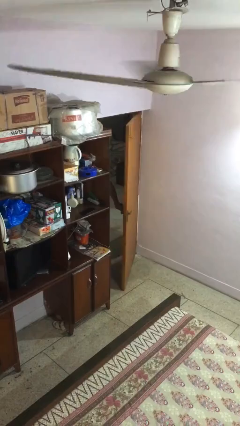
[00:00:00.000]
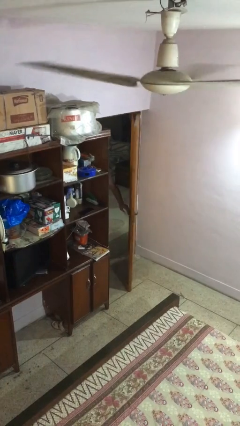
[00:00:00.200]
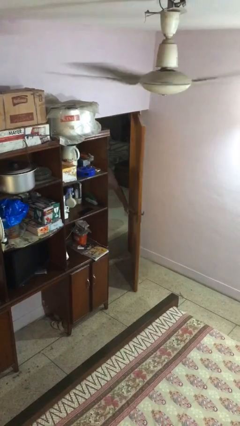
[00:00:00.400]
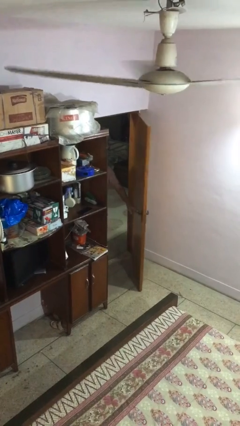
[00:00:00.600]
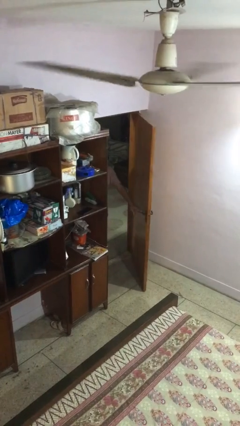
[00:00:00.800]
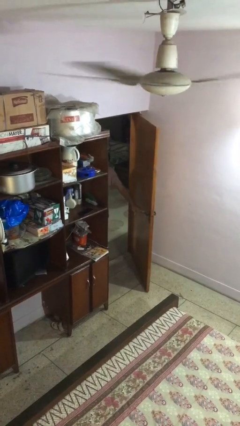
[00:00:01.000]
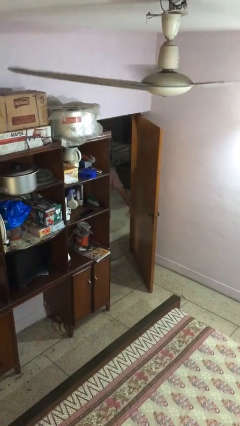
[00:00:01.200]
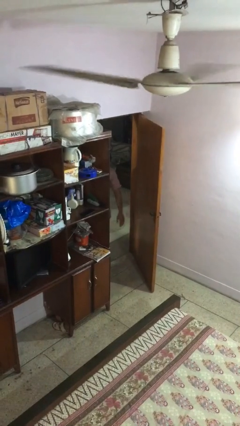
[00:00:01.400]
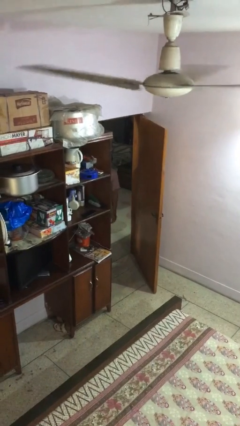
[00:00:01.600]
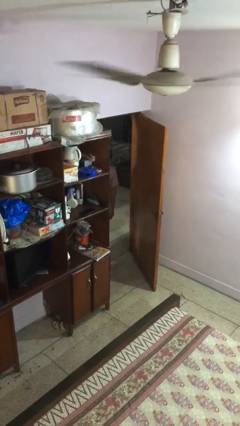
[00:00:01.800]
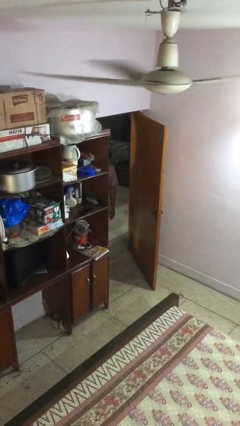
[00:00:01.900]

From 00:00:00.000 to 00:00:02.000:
person opens facility door

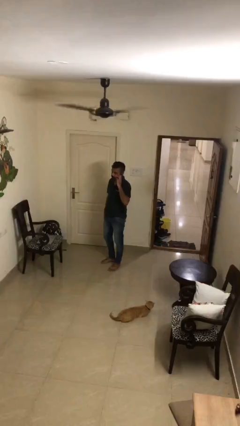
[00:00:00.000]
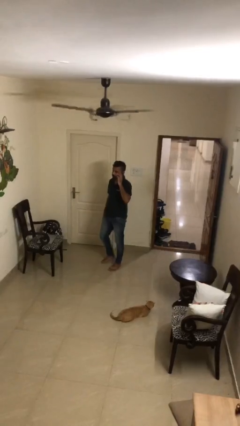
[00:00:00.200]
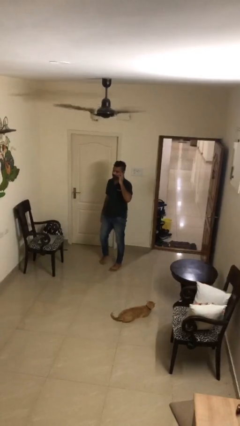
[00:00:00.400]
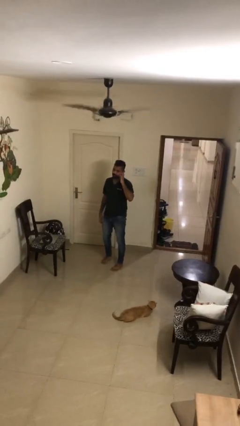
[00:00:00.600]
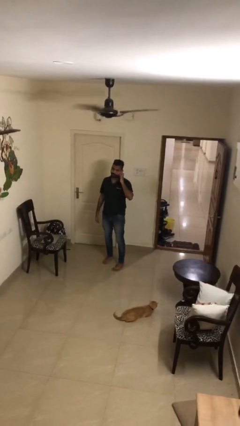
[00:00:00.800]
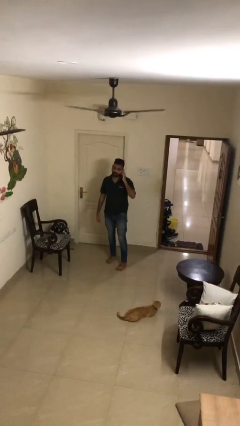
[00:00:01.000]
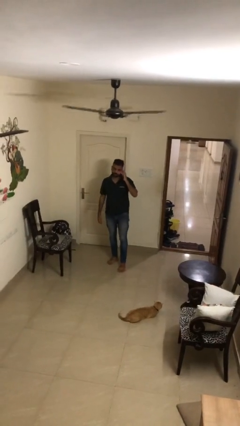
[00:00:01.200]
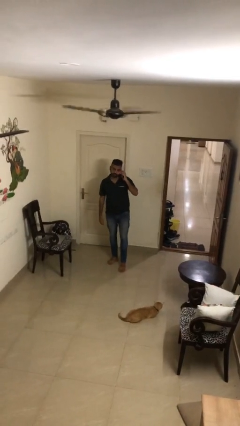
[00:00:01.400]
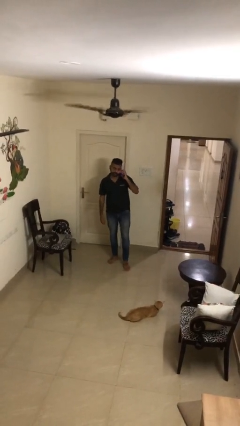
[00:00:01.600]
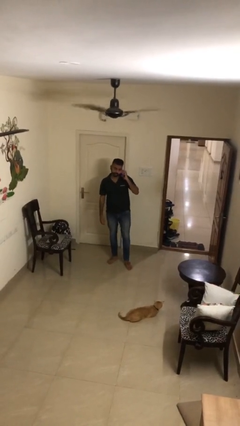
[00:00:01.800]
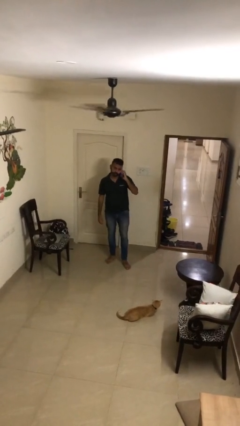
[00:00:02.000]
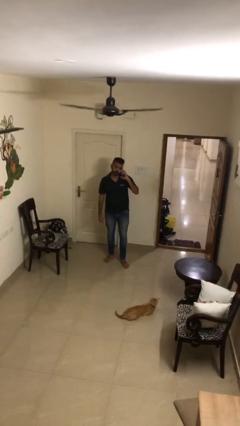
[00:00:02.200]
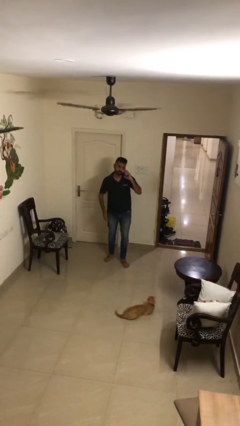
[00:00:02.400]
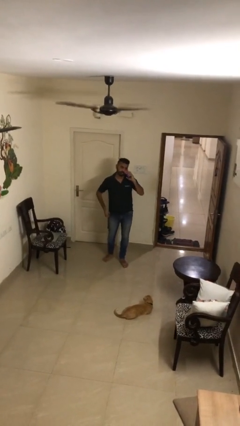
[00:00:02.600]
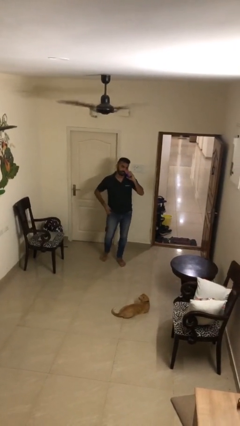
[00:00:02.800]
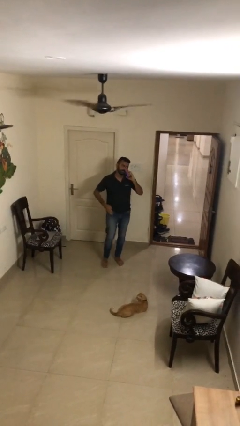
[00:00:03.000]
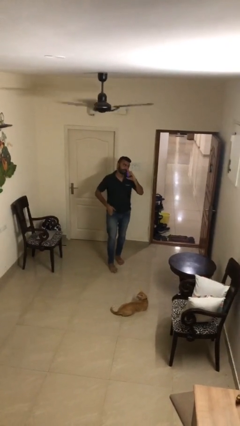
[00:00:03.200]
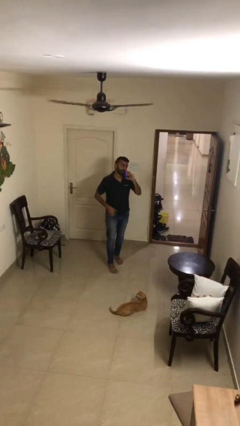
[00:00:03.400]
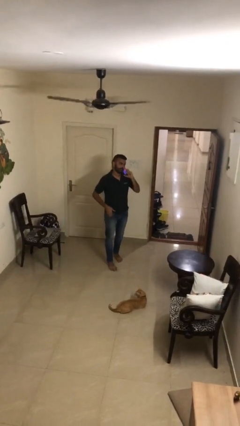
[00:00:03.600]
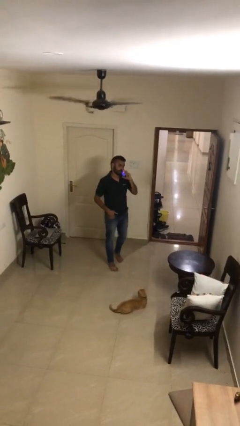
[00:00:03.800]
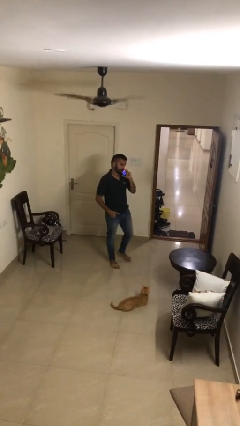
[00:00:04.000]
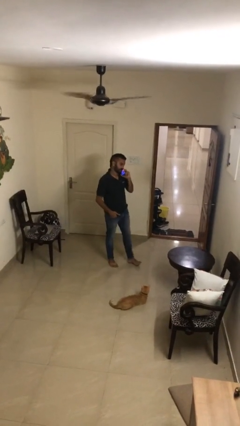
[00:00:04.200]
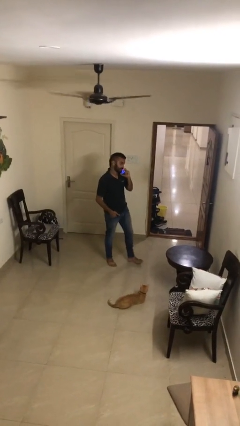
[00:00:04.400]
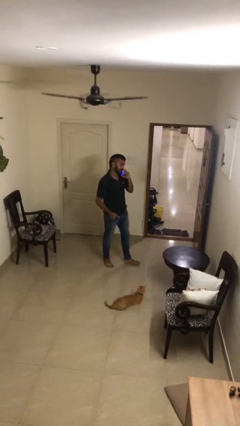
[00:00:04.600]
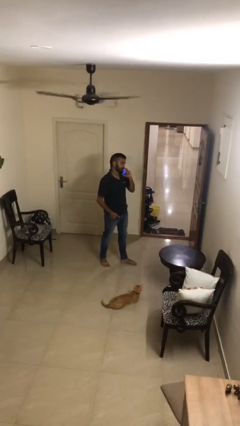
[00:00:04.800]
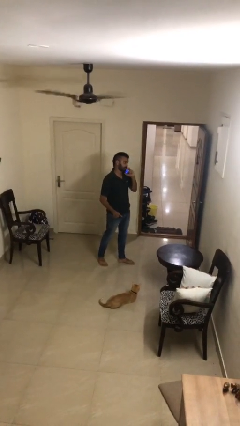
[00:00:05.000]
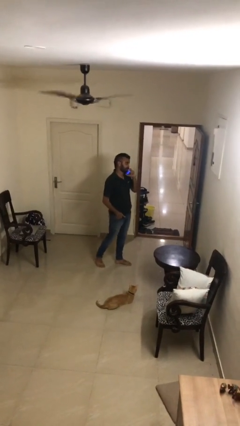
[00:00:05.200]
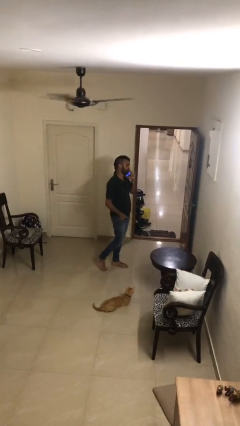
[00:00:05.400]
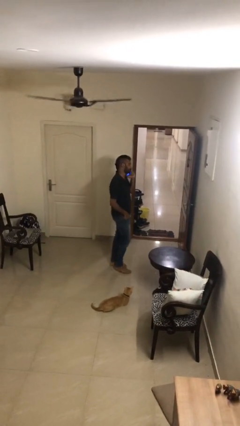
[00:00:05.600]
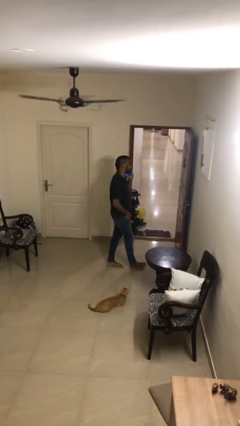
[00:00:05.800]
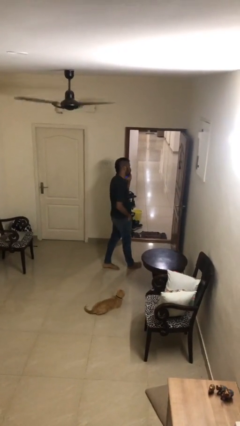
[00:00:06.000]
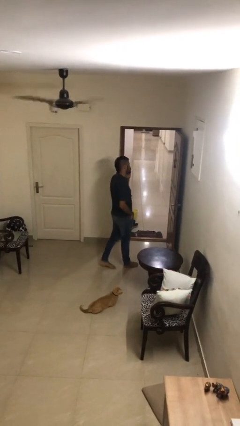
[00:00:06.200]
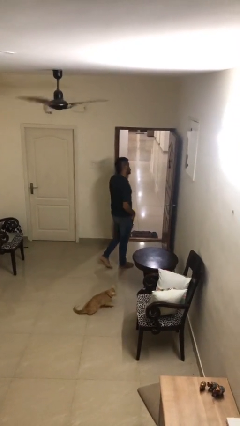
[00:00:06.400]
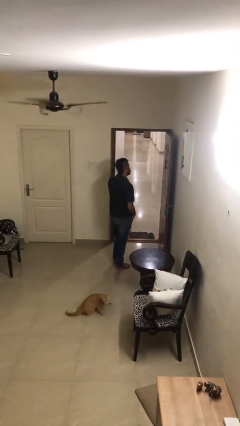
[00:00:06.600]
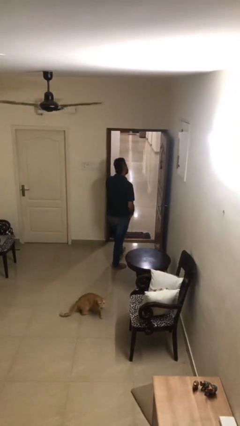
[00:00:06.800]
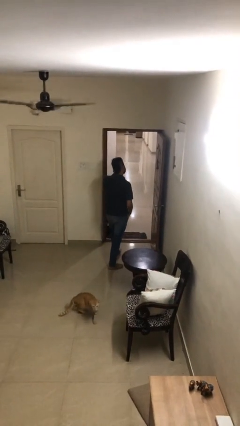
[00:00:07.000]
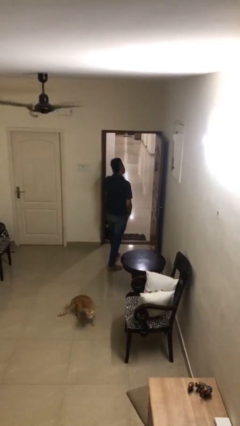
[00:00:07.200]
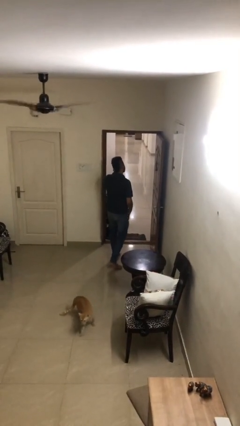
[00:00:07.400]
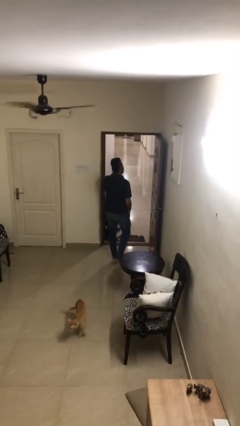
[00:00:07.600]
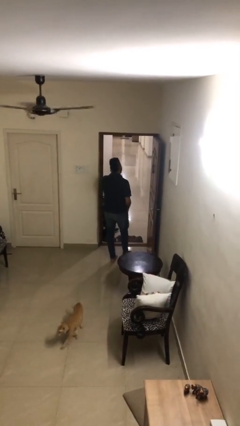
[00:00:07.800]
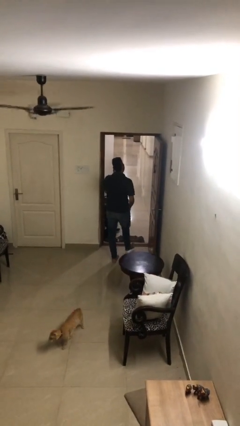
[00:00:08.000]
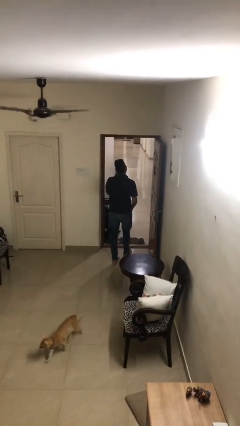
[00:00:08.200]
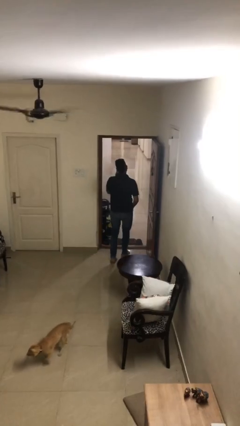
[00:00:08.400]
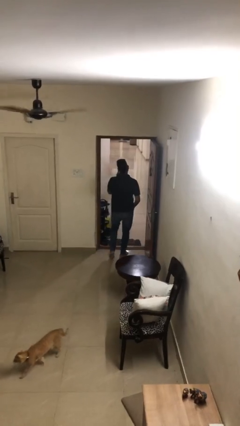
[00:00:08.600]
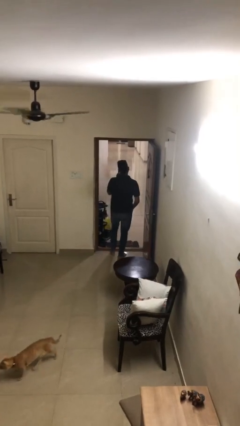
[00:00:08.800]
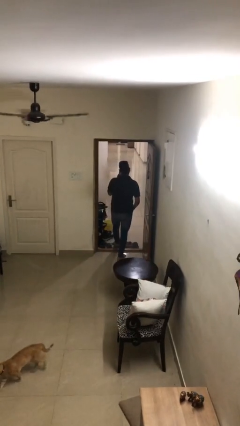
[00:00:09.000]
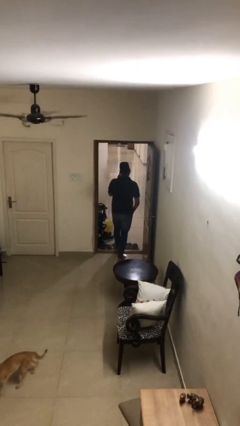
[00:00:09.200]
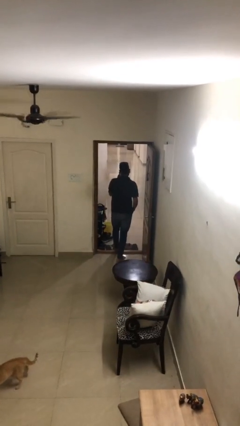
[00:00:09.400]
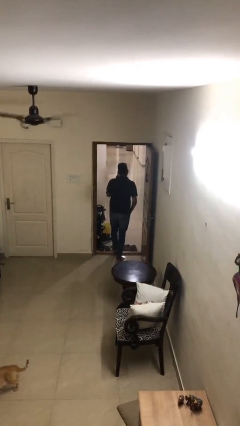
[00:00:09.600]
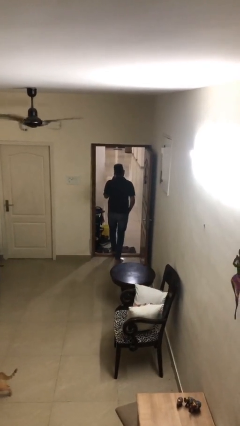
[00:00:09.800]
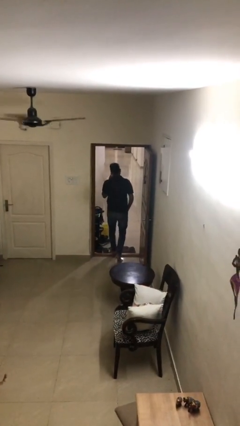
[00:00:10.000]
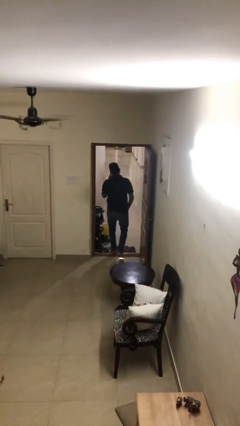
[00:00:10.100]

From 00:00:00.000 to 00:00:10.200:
person talks on phone

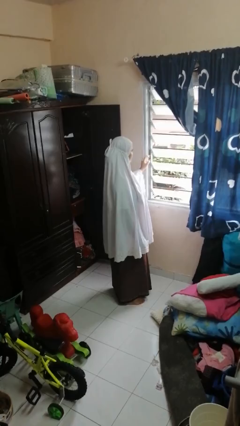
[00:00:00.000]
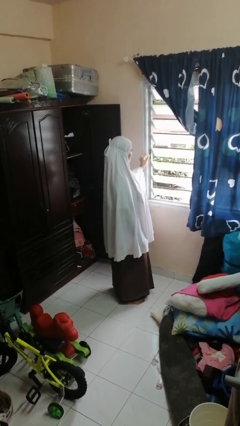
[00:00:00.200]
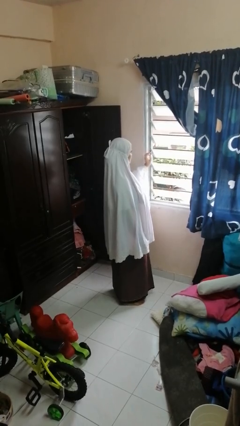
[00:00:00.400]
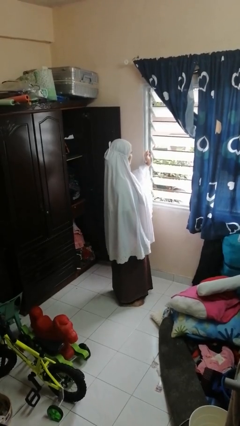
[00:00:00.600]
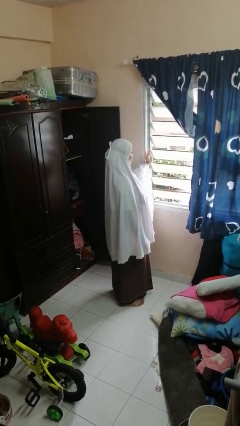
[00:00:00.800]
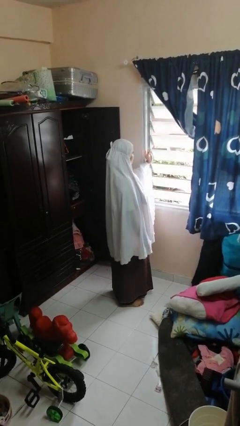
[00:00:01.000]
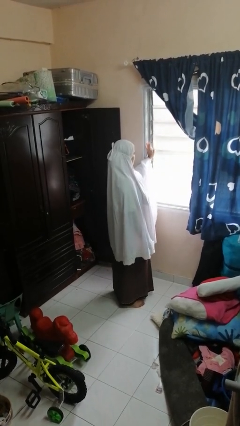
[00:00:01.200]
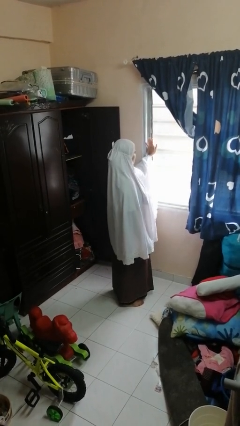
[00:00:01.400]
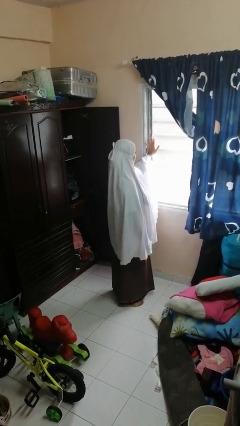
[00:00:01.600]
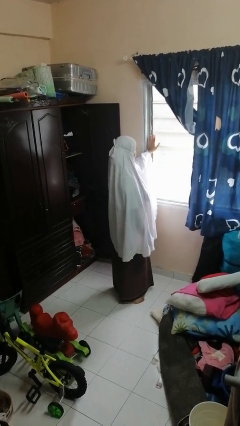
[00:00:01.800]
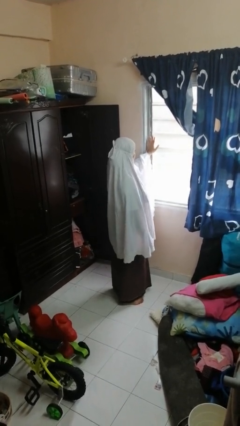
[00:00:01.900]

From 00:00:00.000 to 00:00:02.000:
person closes home window

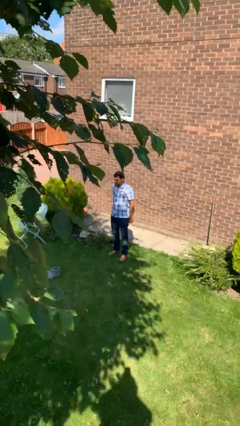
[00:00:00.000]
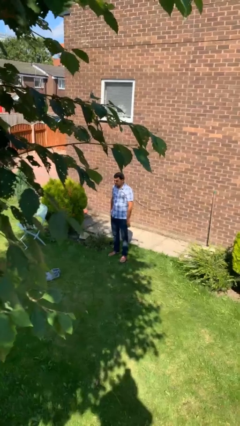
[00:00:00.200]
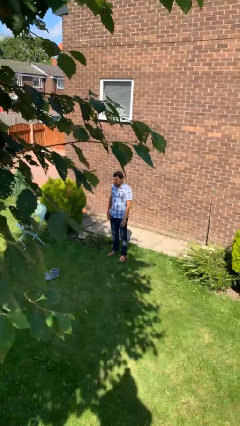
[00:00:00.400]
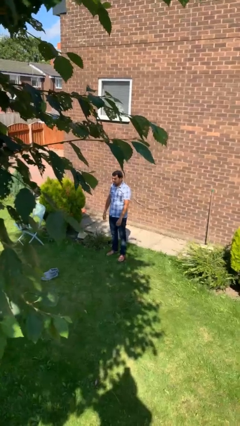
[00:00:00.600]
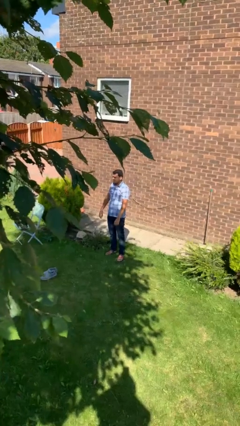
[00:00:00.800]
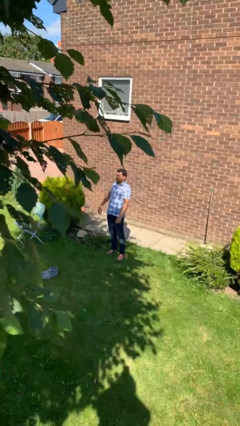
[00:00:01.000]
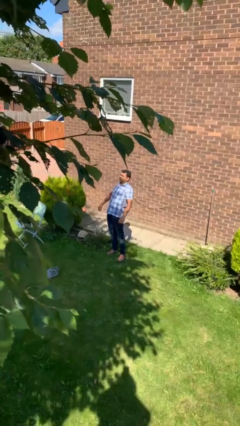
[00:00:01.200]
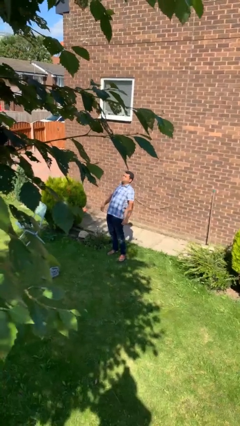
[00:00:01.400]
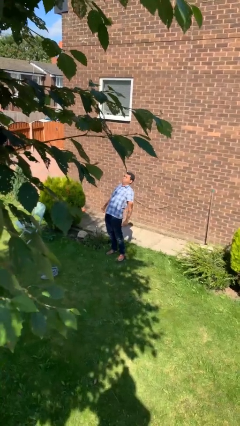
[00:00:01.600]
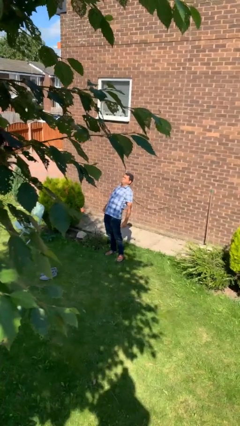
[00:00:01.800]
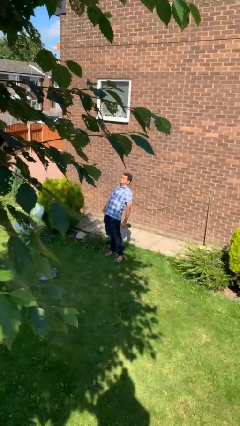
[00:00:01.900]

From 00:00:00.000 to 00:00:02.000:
person stretches back

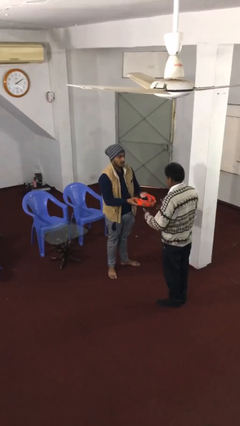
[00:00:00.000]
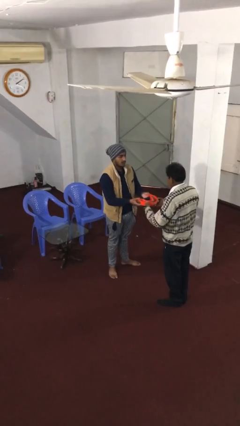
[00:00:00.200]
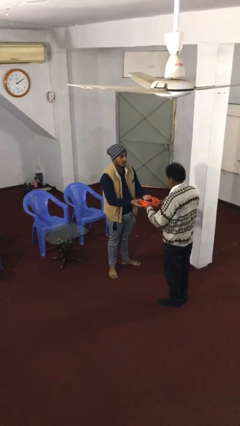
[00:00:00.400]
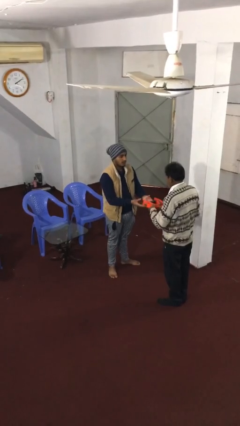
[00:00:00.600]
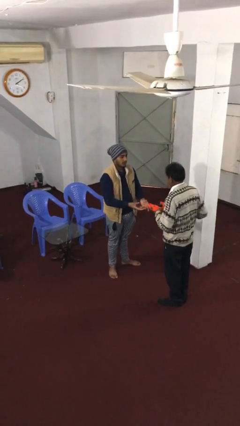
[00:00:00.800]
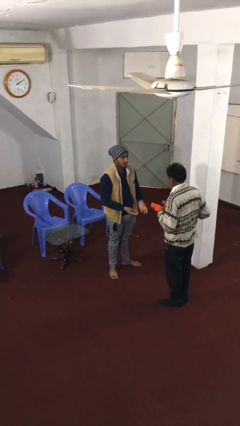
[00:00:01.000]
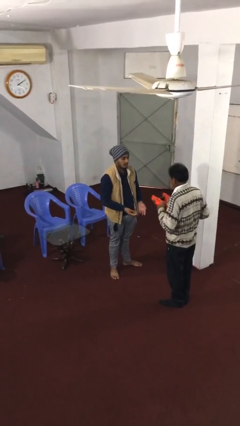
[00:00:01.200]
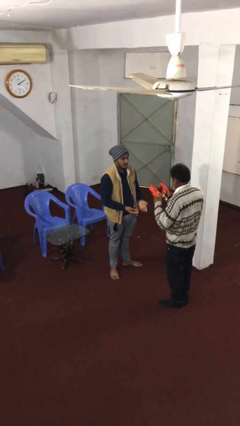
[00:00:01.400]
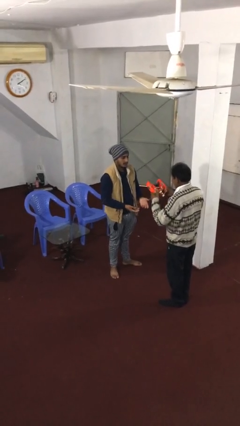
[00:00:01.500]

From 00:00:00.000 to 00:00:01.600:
person transfers object to person
